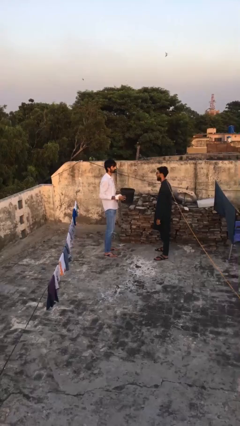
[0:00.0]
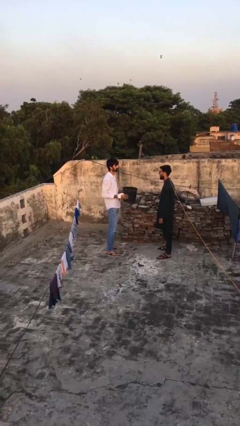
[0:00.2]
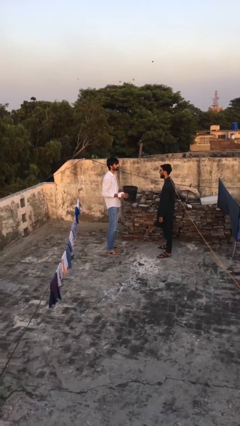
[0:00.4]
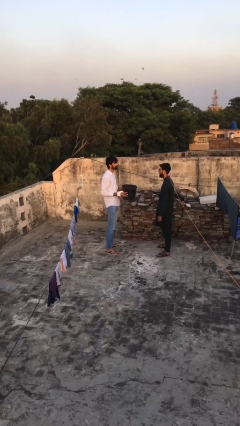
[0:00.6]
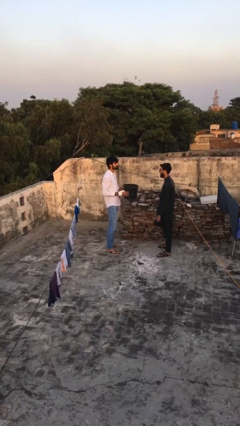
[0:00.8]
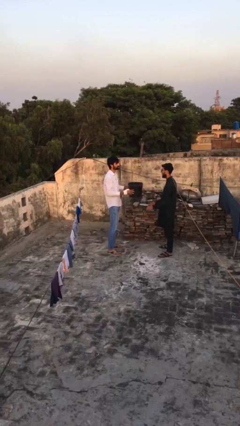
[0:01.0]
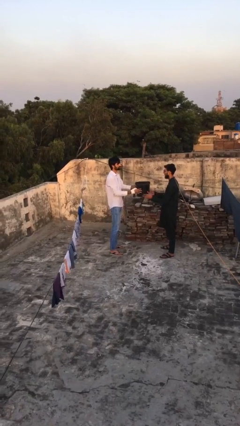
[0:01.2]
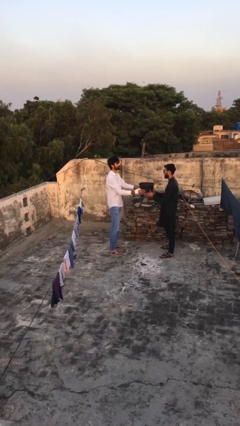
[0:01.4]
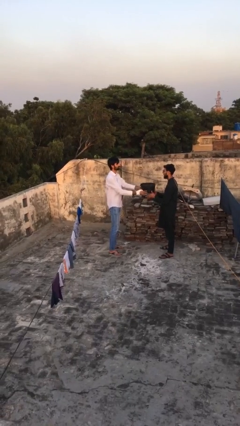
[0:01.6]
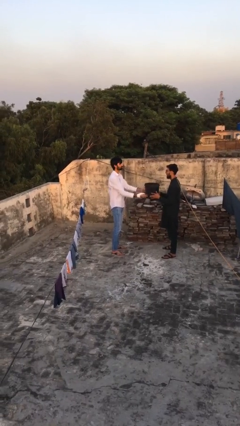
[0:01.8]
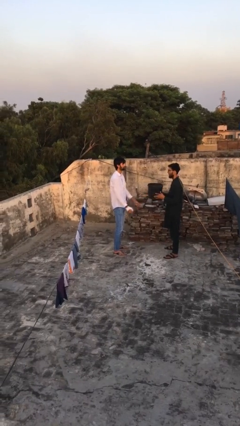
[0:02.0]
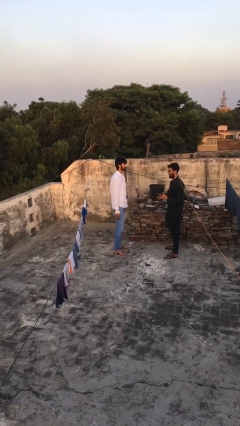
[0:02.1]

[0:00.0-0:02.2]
person transfers object to person

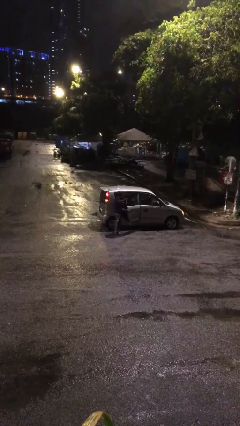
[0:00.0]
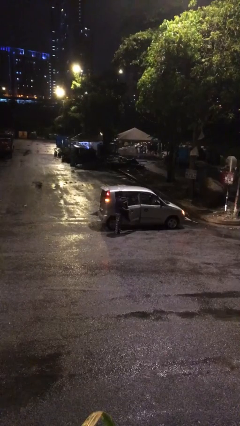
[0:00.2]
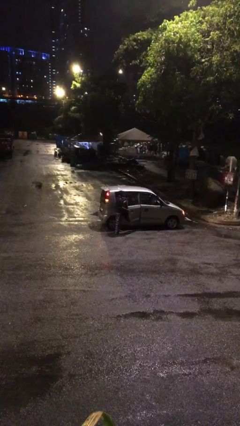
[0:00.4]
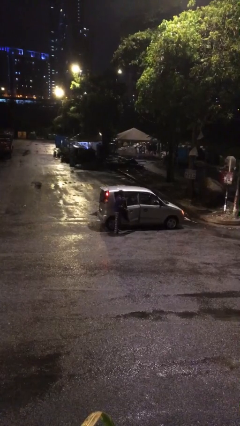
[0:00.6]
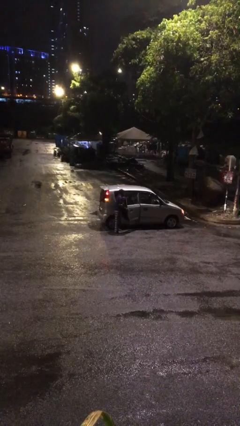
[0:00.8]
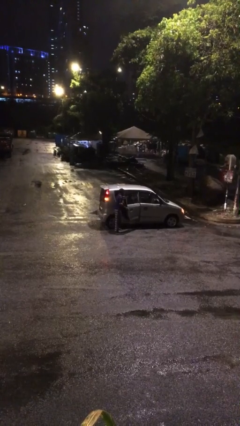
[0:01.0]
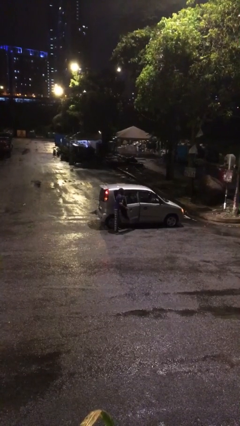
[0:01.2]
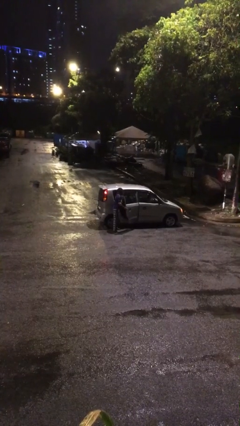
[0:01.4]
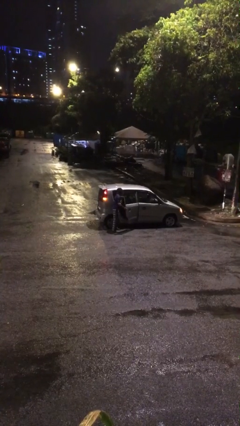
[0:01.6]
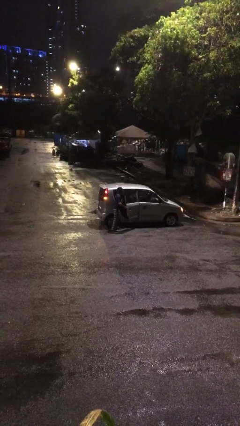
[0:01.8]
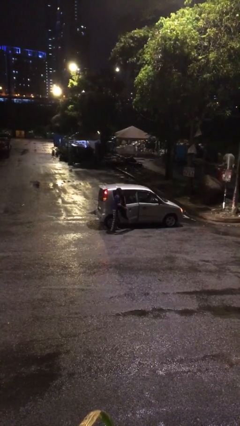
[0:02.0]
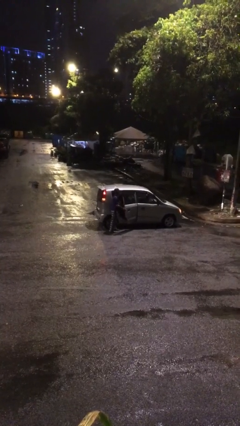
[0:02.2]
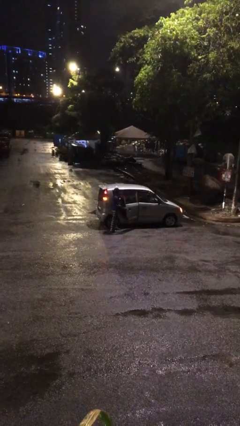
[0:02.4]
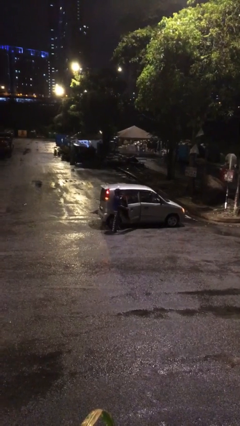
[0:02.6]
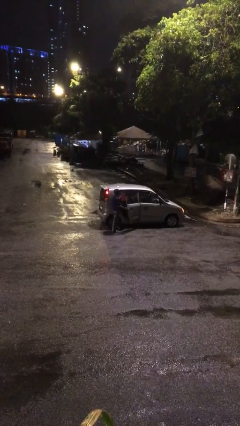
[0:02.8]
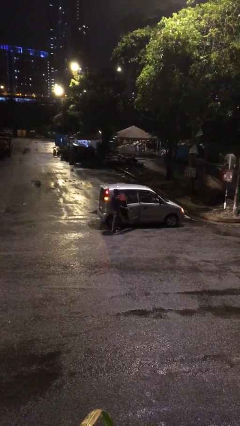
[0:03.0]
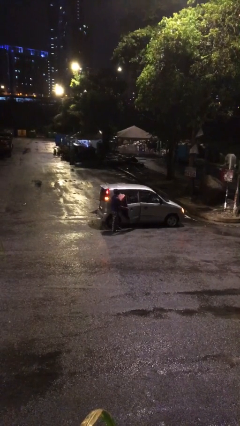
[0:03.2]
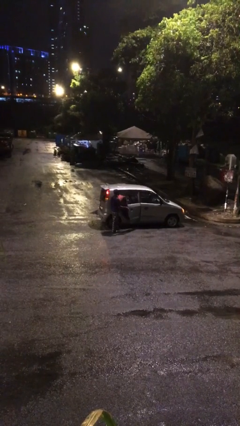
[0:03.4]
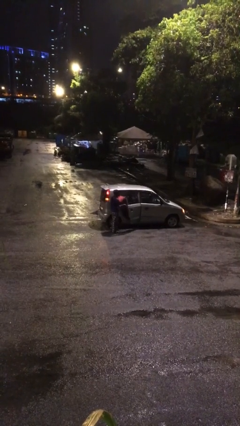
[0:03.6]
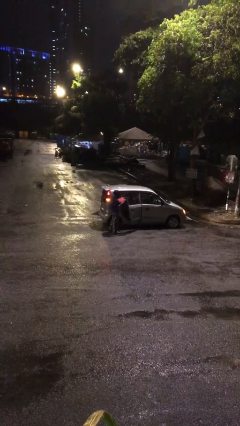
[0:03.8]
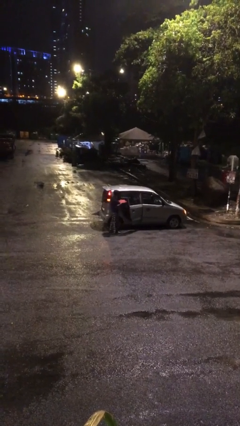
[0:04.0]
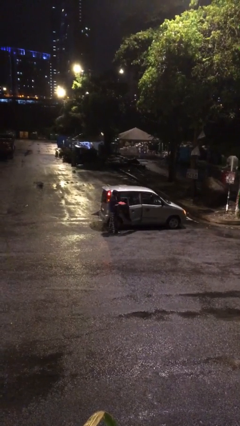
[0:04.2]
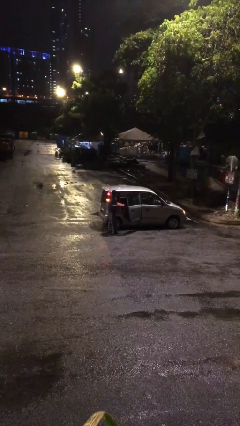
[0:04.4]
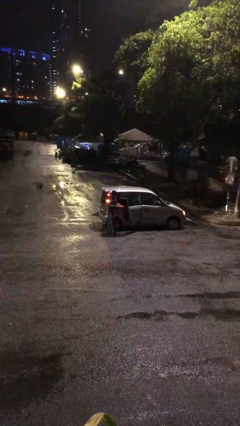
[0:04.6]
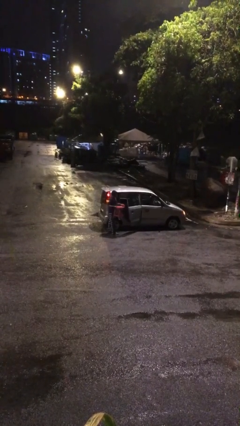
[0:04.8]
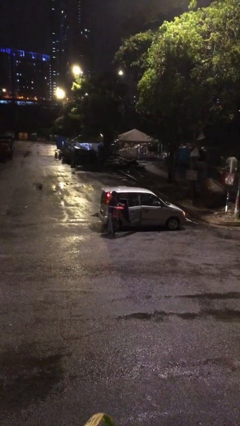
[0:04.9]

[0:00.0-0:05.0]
person unloads car

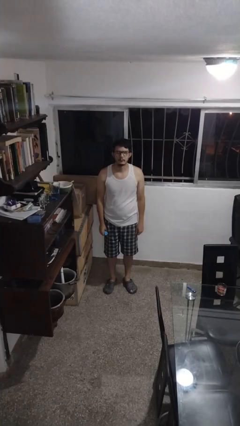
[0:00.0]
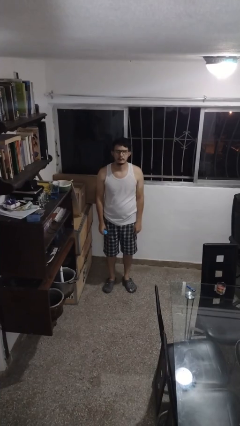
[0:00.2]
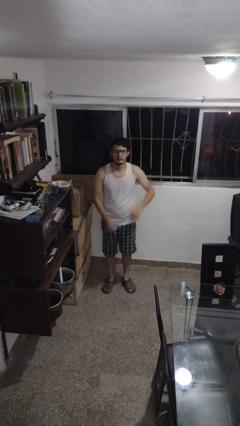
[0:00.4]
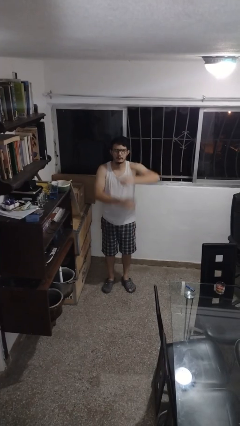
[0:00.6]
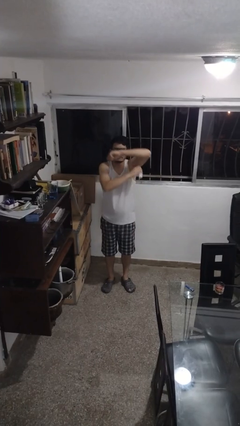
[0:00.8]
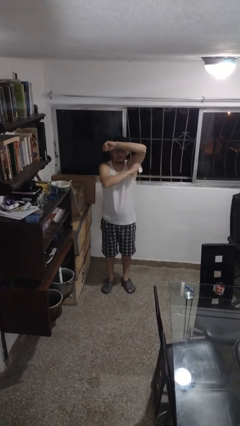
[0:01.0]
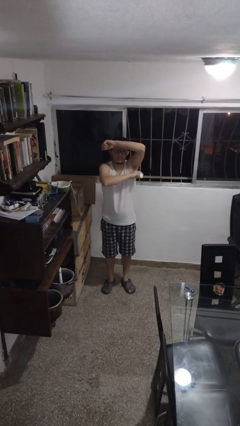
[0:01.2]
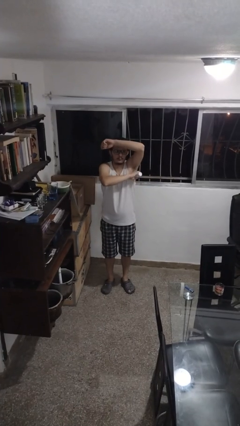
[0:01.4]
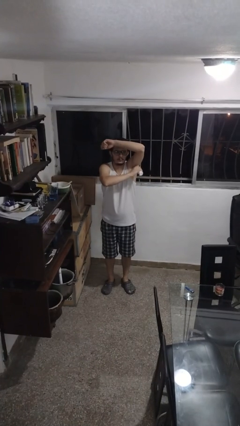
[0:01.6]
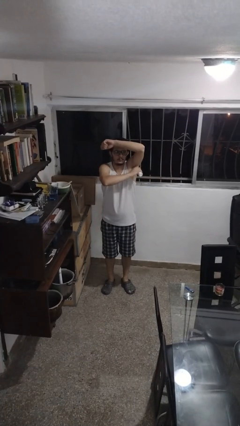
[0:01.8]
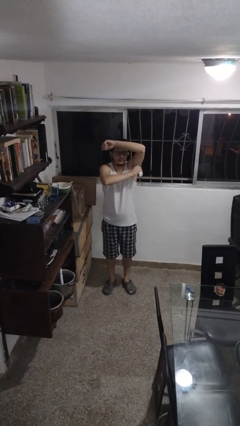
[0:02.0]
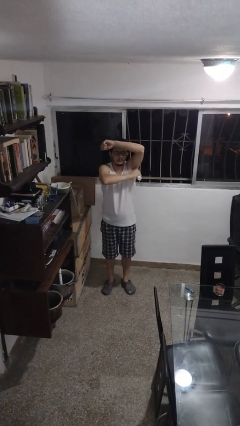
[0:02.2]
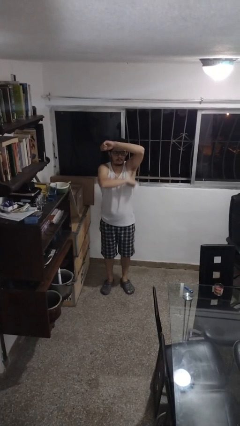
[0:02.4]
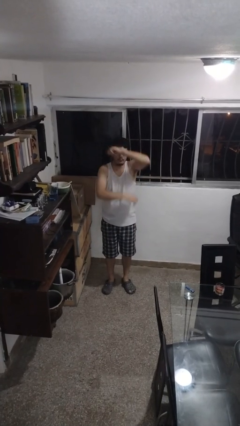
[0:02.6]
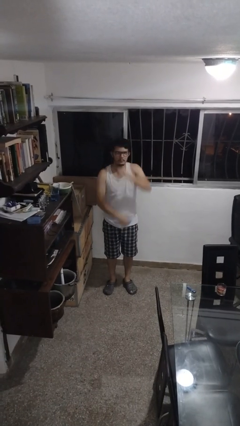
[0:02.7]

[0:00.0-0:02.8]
person applies deodorant

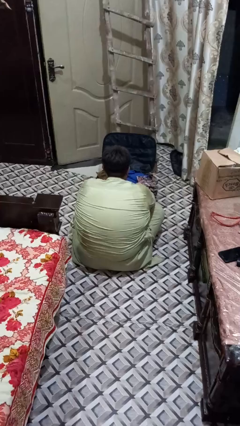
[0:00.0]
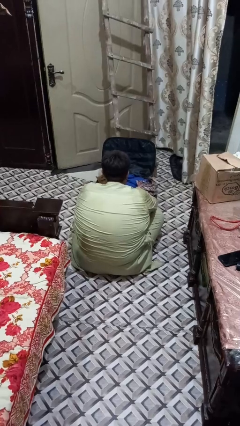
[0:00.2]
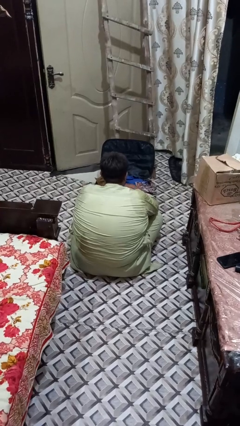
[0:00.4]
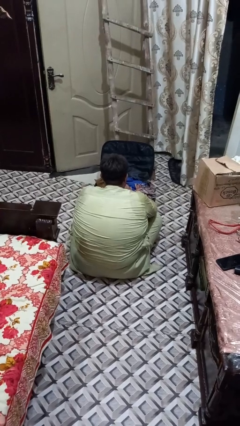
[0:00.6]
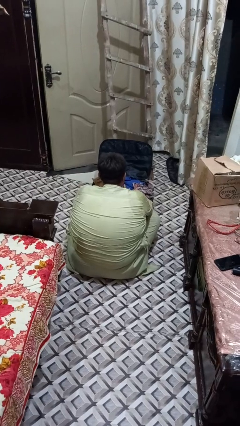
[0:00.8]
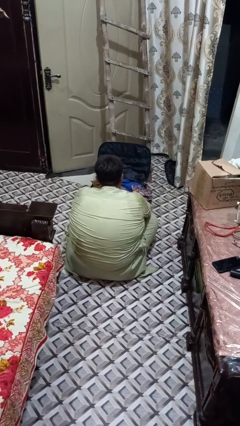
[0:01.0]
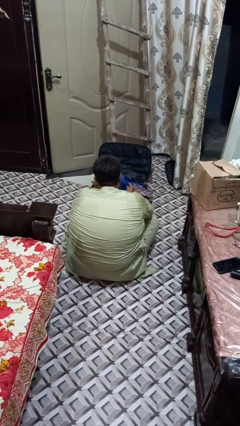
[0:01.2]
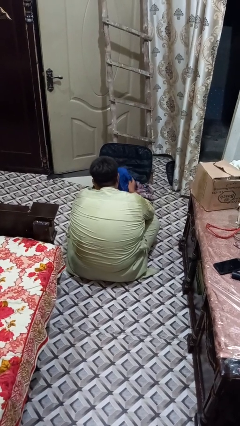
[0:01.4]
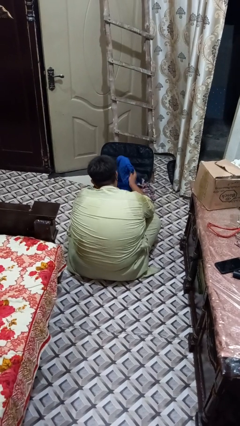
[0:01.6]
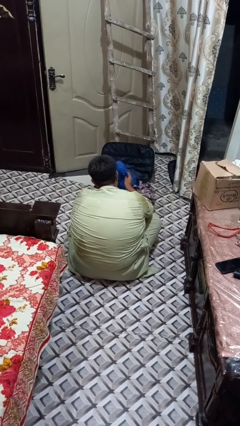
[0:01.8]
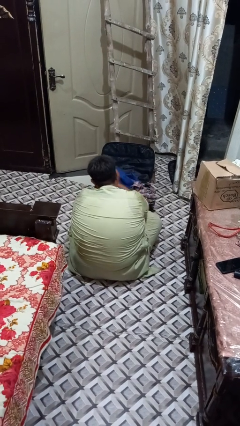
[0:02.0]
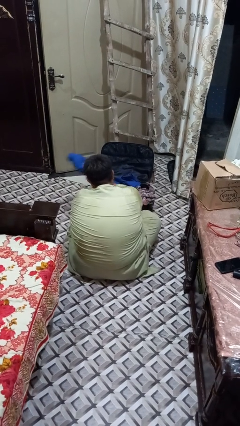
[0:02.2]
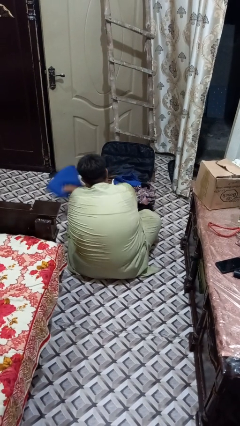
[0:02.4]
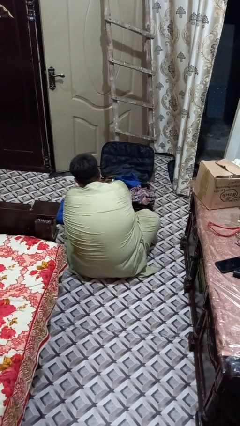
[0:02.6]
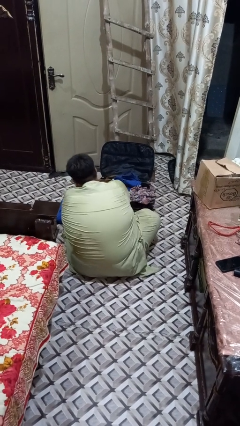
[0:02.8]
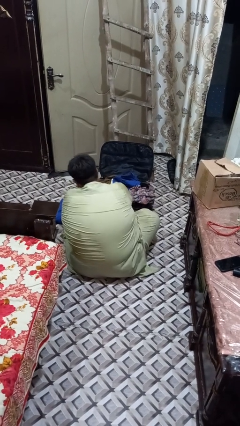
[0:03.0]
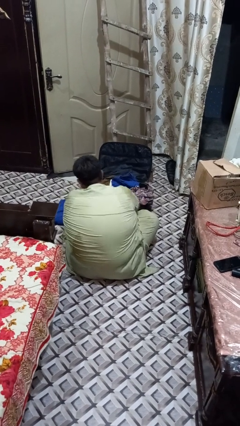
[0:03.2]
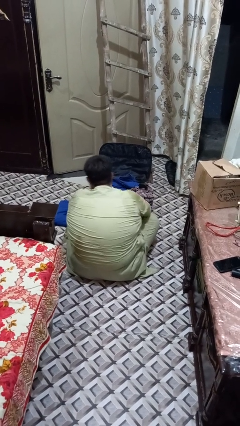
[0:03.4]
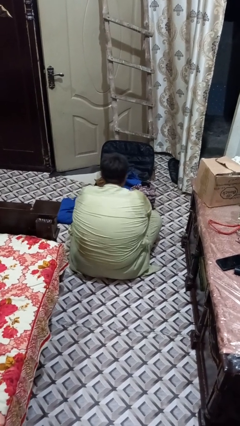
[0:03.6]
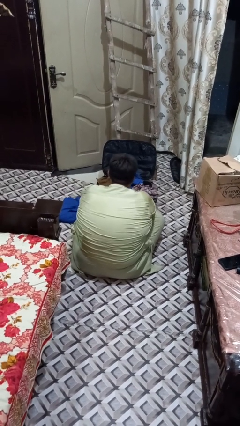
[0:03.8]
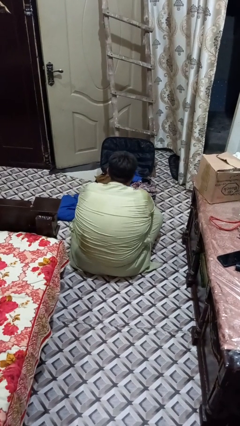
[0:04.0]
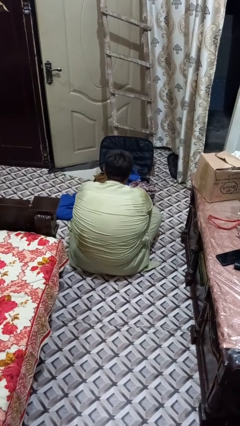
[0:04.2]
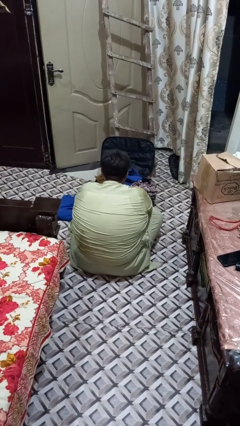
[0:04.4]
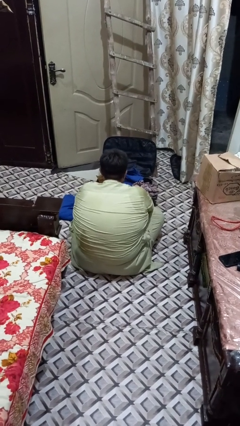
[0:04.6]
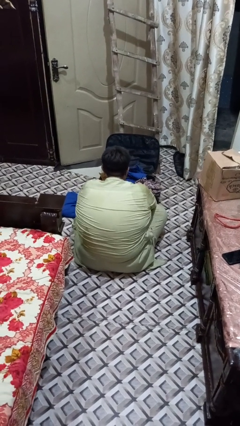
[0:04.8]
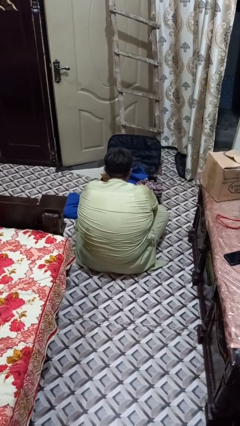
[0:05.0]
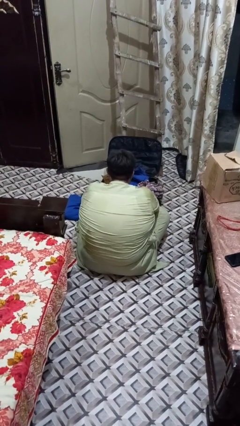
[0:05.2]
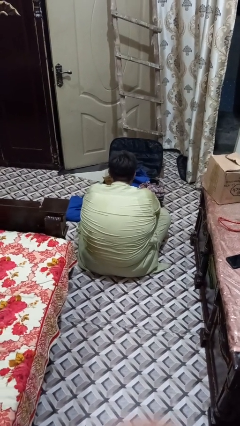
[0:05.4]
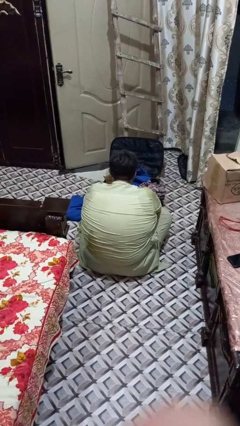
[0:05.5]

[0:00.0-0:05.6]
person unloads clothes from suitcase

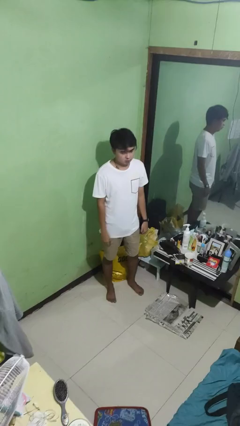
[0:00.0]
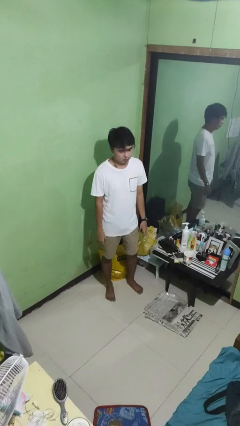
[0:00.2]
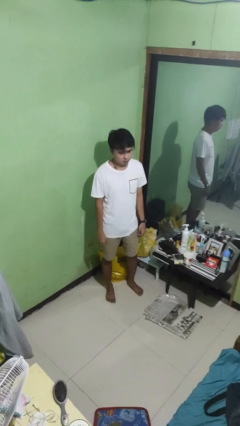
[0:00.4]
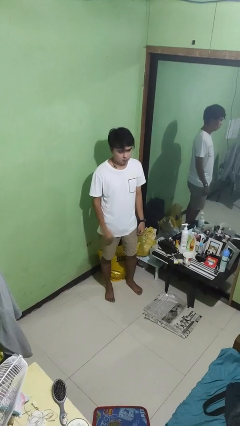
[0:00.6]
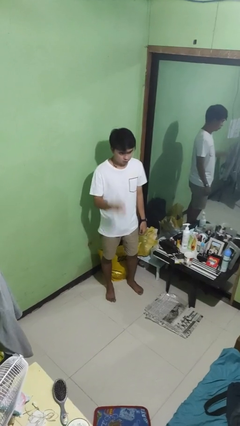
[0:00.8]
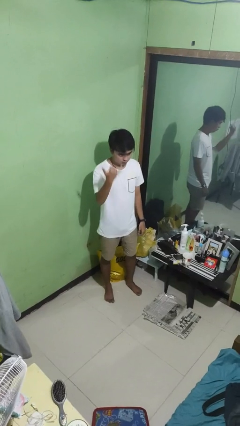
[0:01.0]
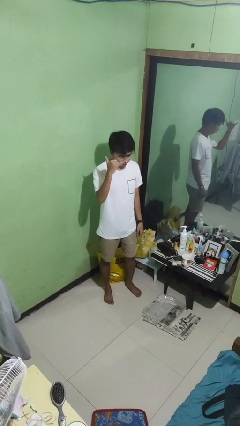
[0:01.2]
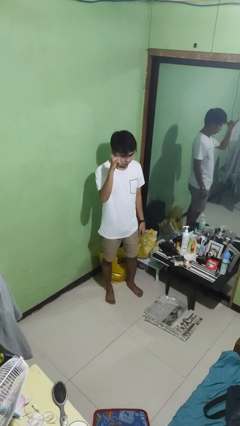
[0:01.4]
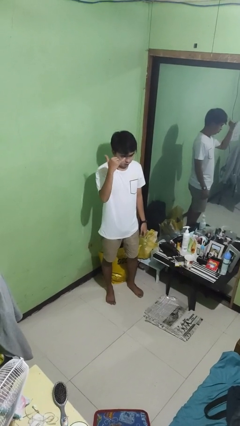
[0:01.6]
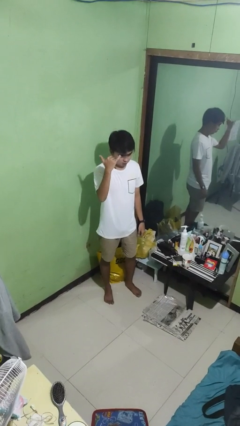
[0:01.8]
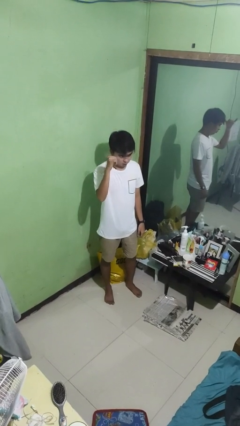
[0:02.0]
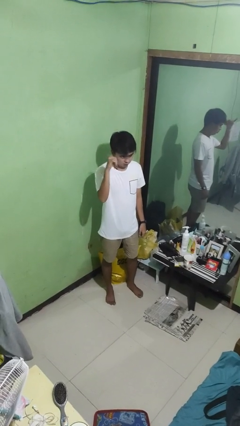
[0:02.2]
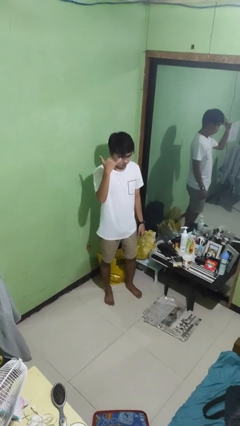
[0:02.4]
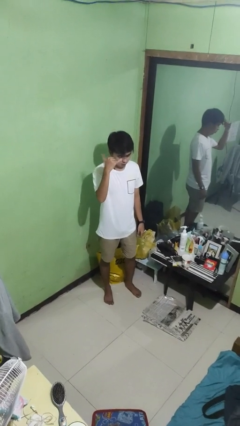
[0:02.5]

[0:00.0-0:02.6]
person gestures hang loose
